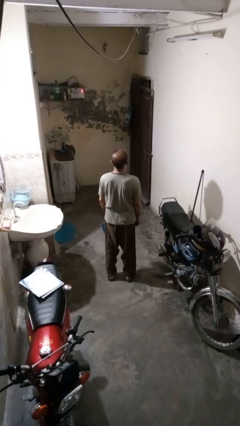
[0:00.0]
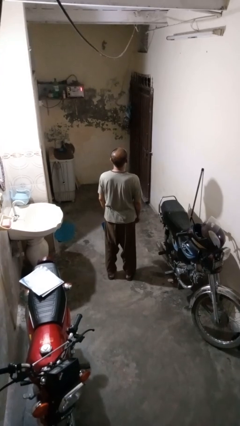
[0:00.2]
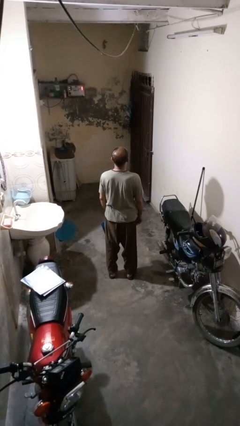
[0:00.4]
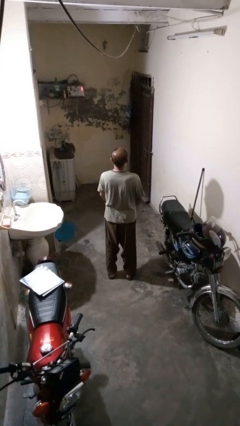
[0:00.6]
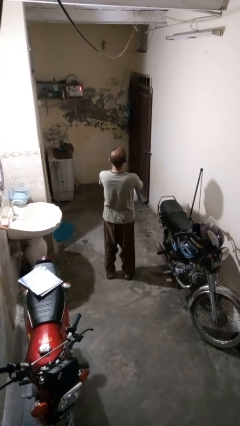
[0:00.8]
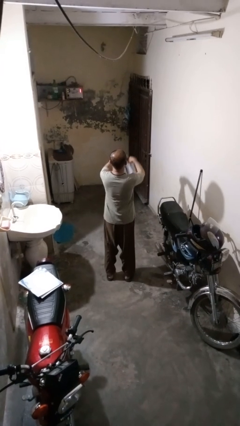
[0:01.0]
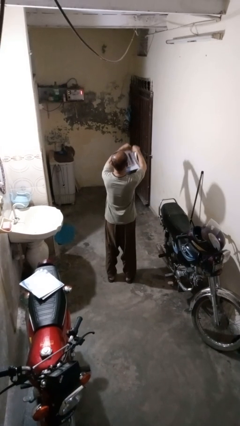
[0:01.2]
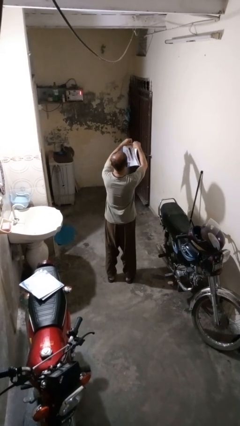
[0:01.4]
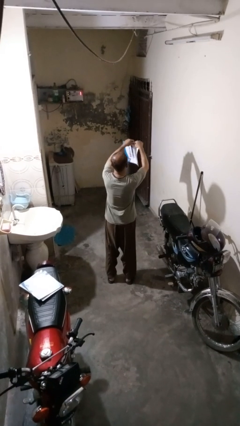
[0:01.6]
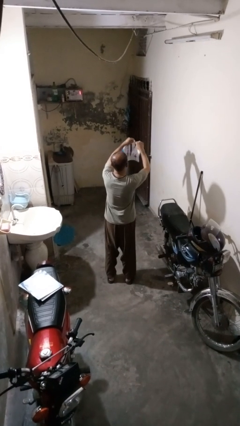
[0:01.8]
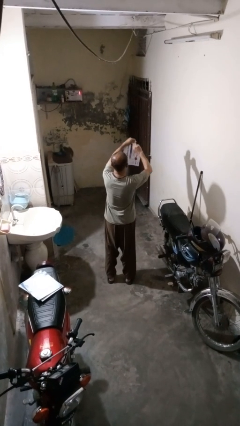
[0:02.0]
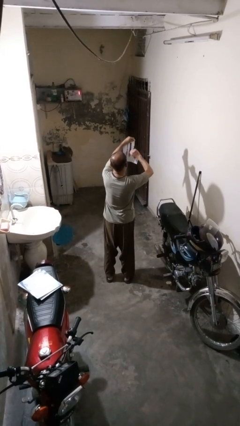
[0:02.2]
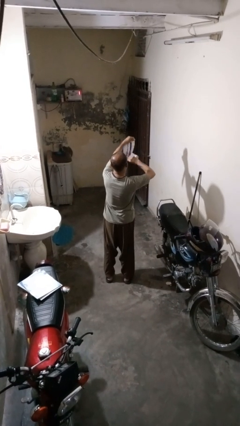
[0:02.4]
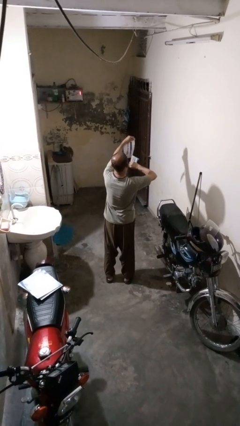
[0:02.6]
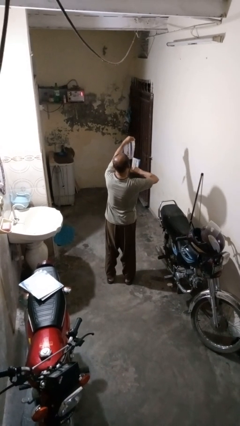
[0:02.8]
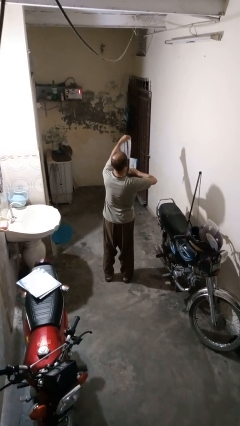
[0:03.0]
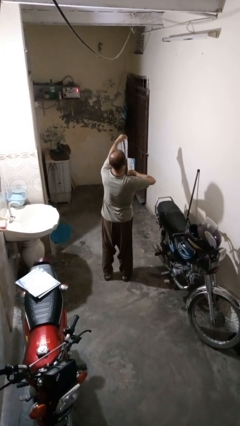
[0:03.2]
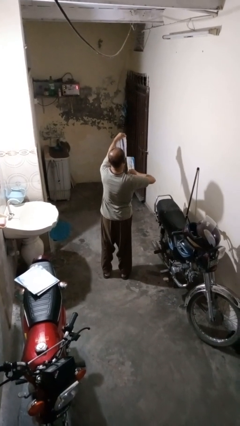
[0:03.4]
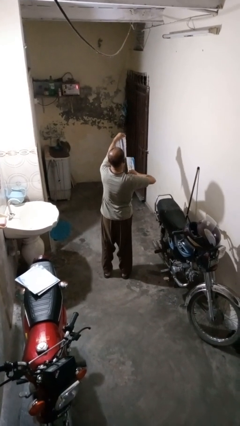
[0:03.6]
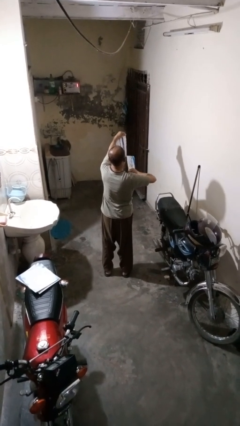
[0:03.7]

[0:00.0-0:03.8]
person tears paper

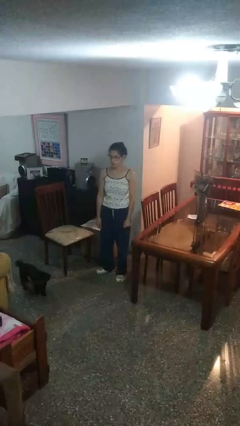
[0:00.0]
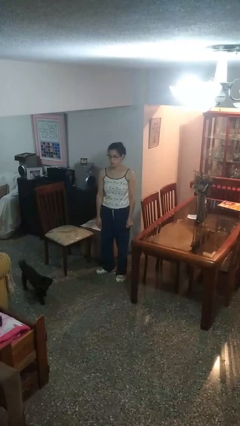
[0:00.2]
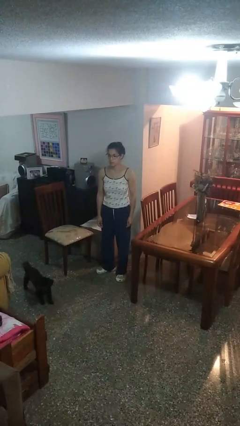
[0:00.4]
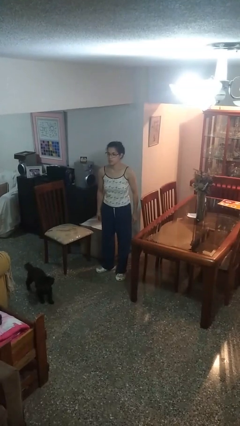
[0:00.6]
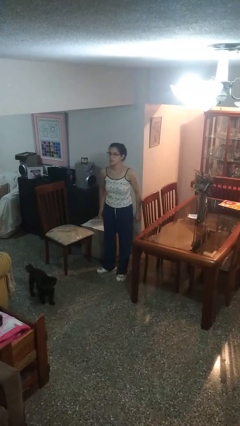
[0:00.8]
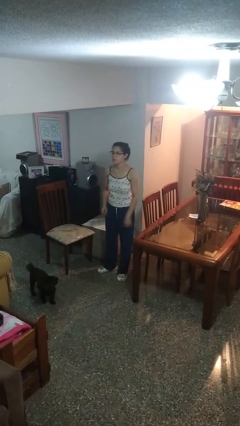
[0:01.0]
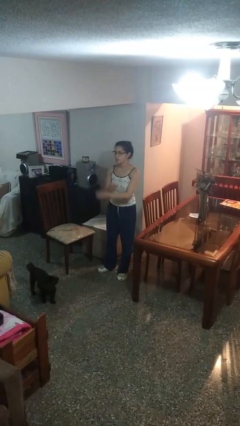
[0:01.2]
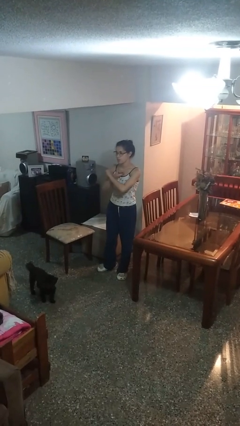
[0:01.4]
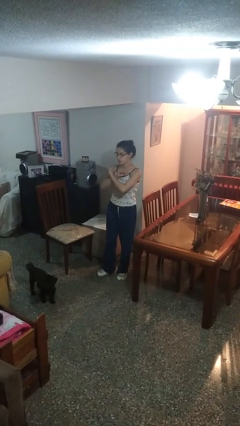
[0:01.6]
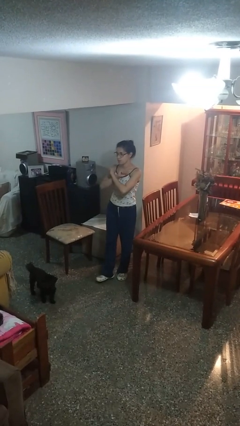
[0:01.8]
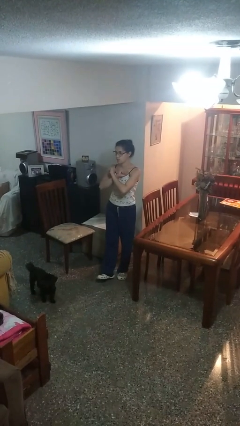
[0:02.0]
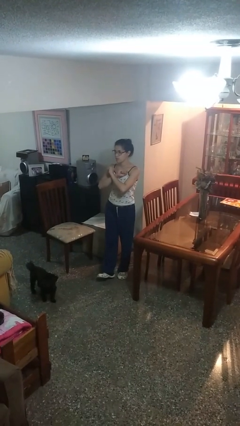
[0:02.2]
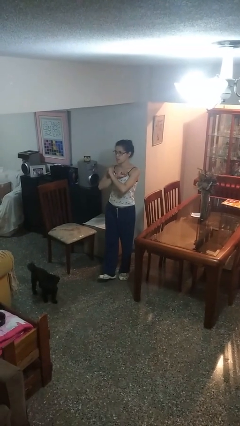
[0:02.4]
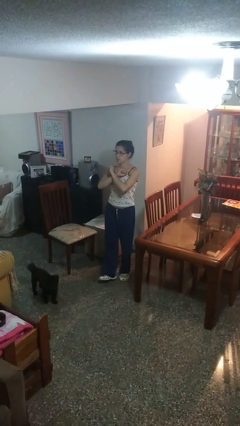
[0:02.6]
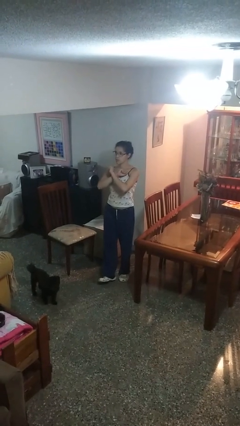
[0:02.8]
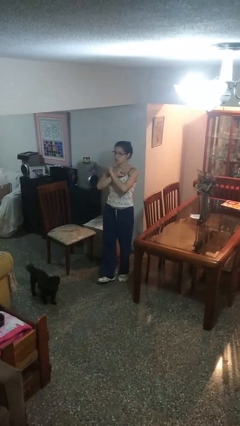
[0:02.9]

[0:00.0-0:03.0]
person gestures arms x

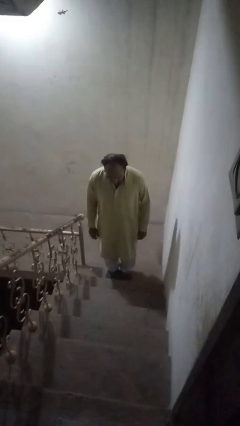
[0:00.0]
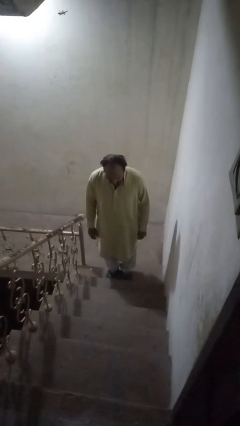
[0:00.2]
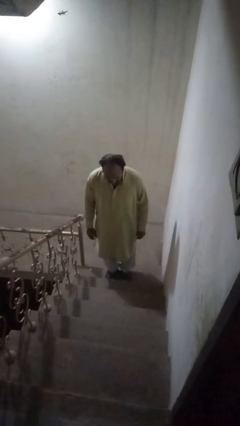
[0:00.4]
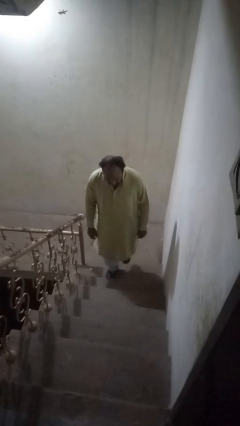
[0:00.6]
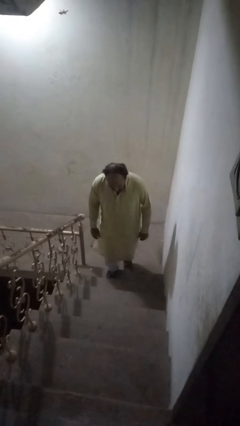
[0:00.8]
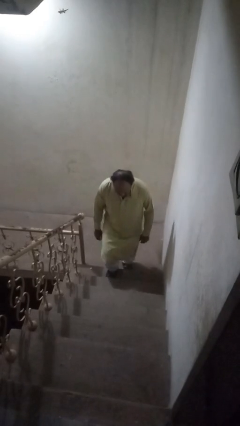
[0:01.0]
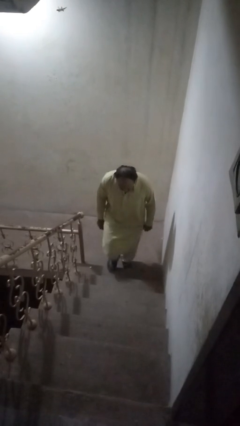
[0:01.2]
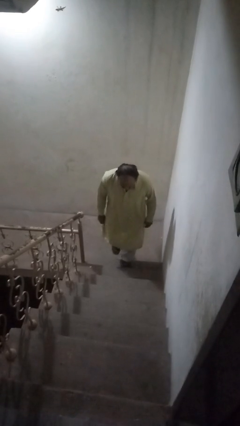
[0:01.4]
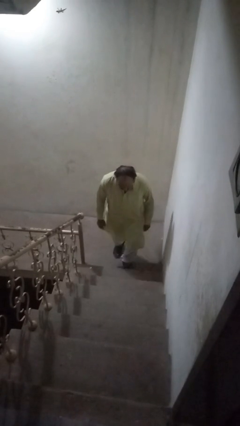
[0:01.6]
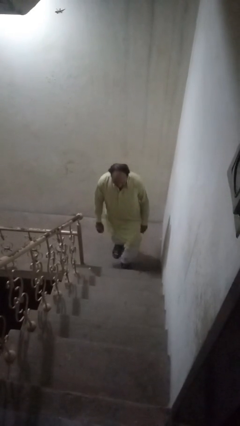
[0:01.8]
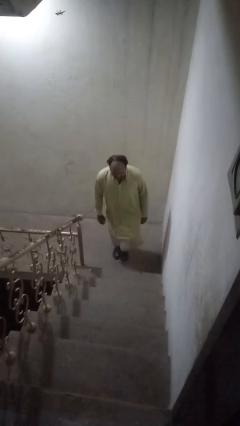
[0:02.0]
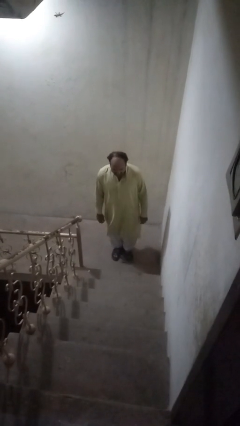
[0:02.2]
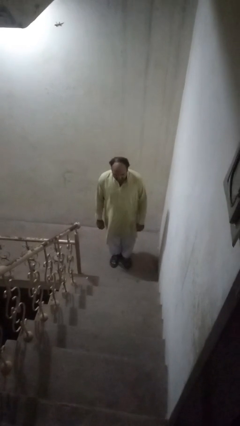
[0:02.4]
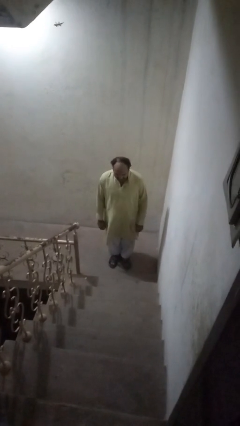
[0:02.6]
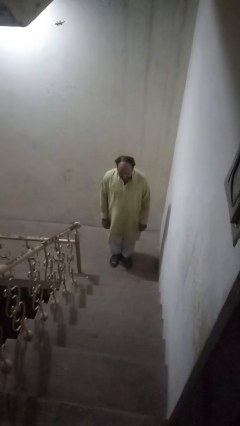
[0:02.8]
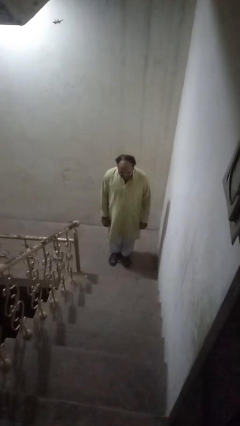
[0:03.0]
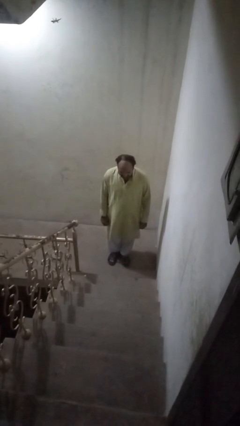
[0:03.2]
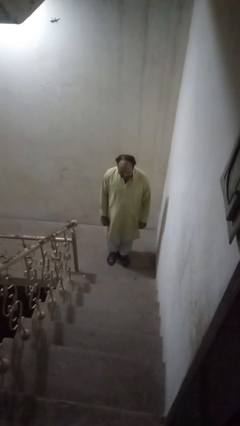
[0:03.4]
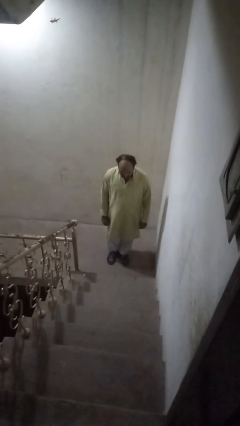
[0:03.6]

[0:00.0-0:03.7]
person climbs down ladder

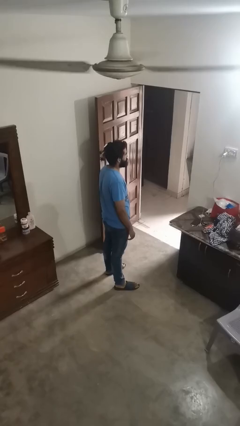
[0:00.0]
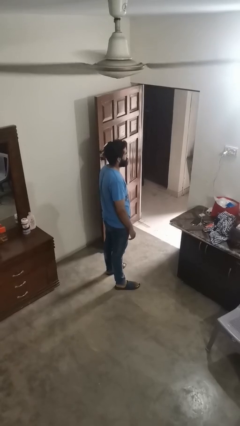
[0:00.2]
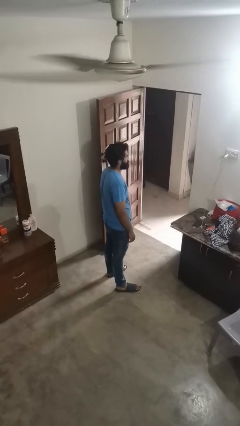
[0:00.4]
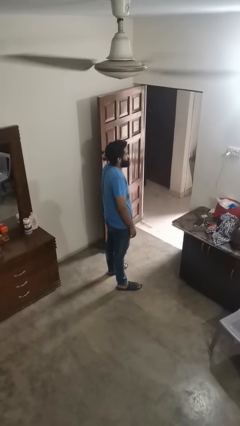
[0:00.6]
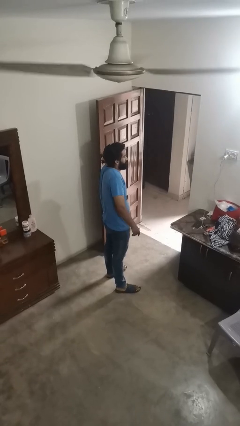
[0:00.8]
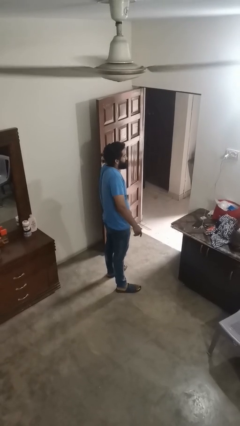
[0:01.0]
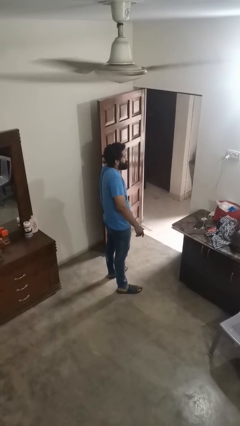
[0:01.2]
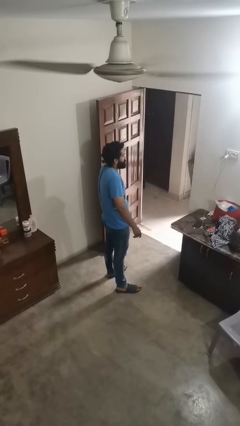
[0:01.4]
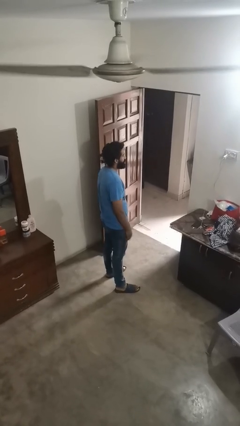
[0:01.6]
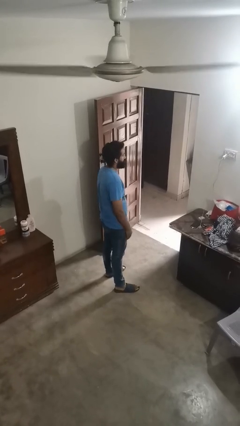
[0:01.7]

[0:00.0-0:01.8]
person shrugs

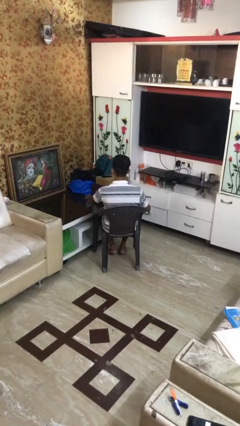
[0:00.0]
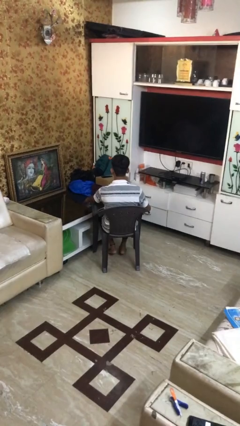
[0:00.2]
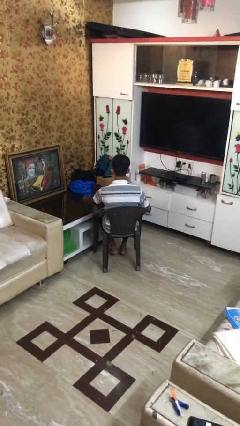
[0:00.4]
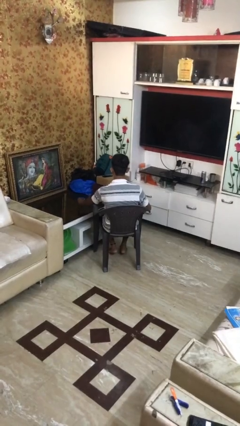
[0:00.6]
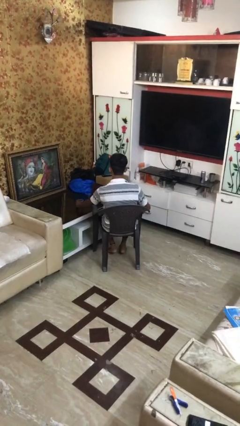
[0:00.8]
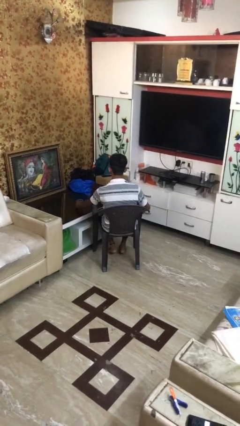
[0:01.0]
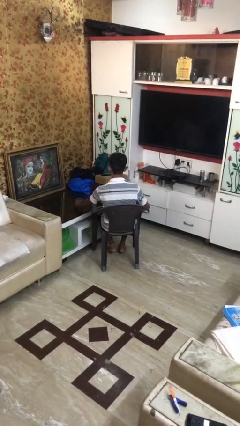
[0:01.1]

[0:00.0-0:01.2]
person sets upright glass

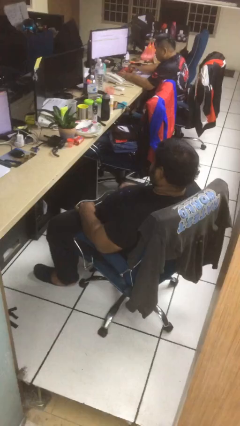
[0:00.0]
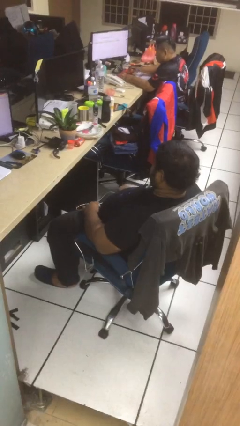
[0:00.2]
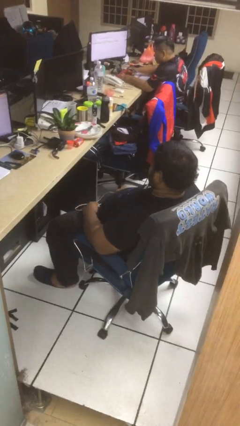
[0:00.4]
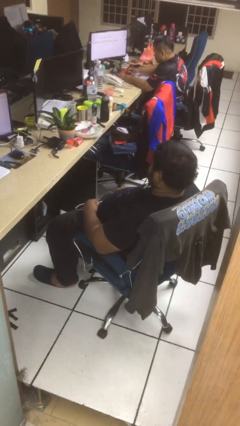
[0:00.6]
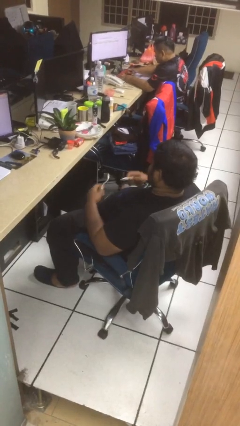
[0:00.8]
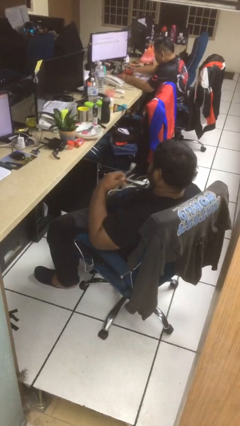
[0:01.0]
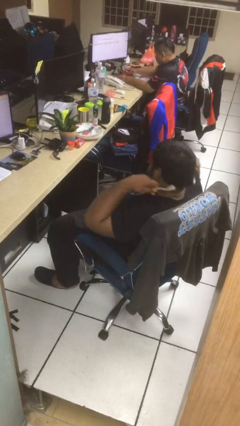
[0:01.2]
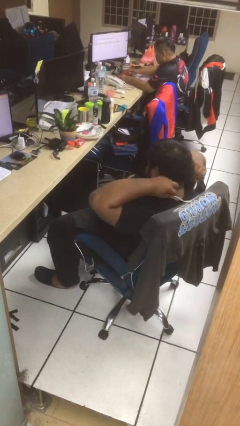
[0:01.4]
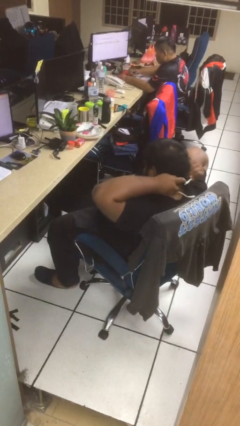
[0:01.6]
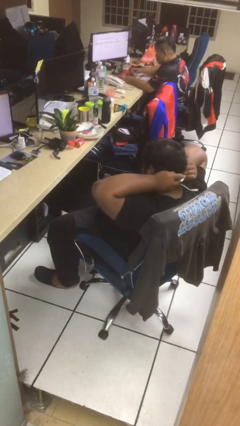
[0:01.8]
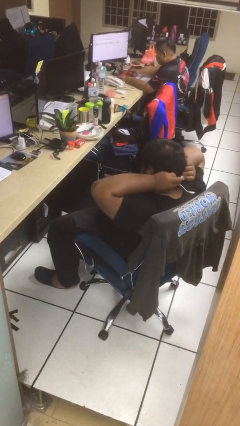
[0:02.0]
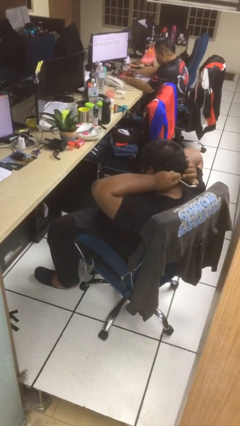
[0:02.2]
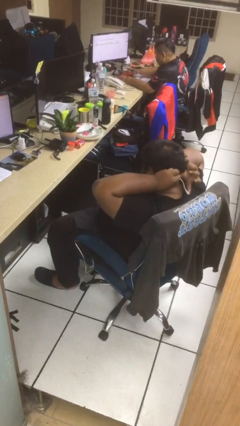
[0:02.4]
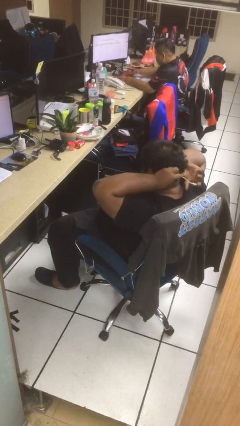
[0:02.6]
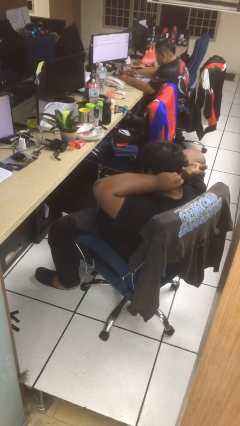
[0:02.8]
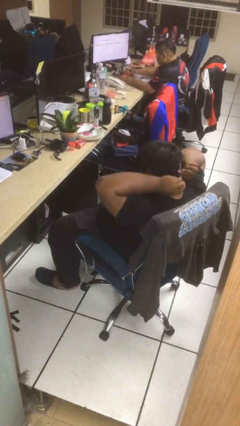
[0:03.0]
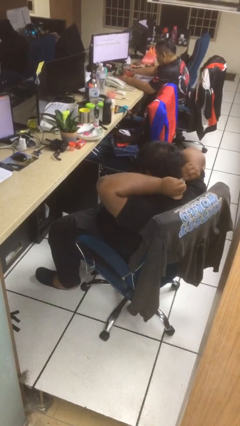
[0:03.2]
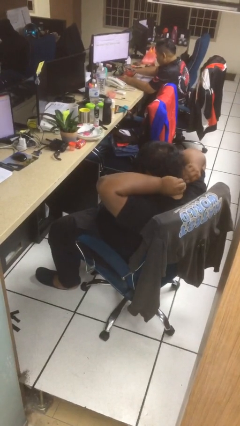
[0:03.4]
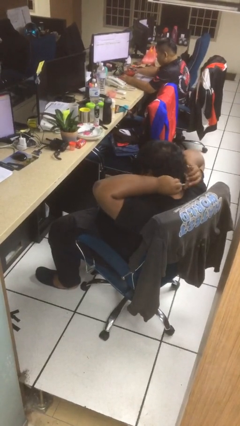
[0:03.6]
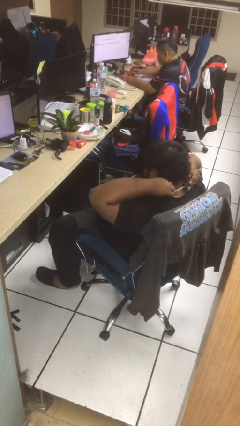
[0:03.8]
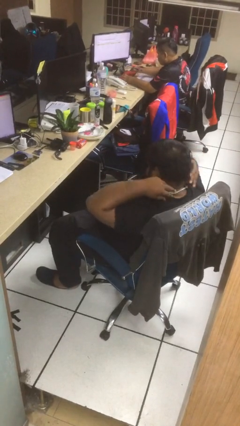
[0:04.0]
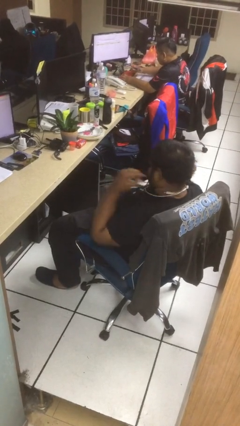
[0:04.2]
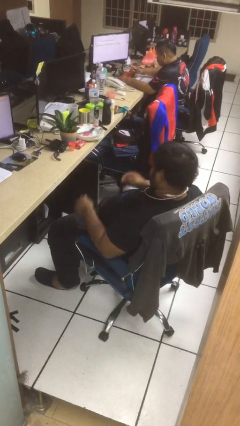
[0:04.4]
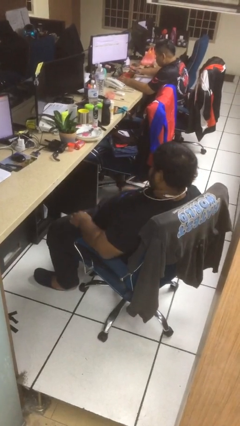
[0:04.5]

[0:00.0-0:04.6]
person puts on necklace
